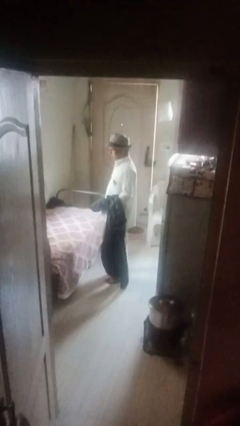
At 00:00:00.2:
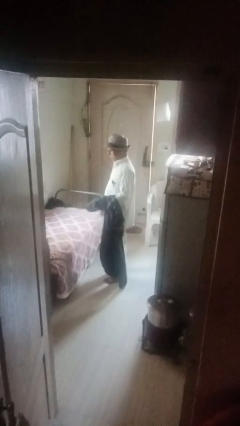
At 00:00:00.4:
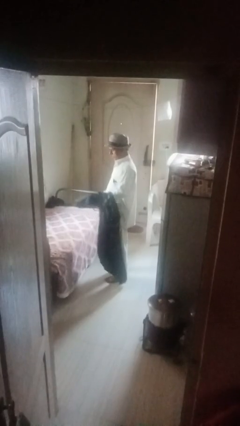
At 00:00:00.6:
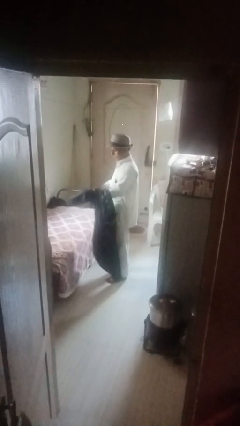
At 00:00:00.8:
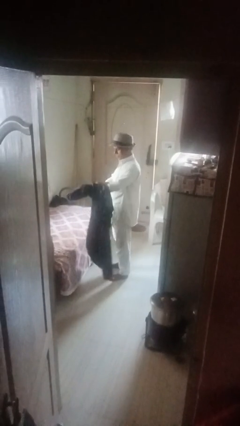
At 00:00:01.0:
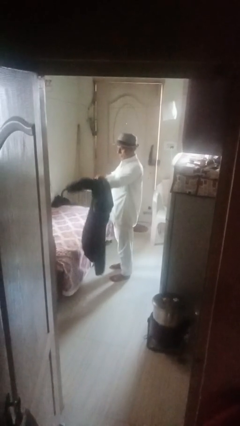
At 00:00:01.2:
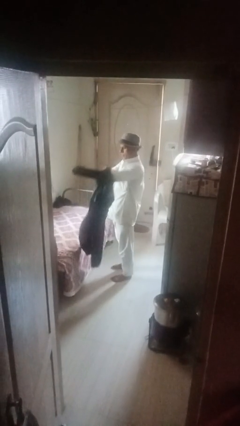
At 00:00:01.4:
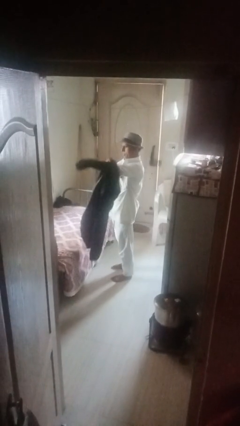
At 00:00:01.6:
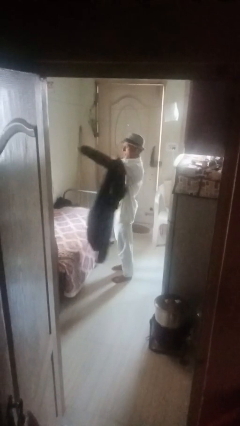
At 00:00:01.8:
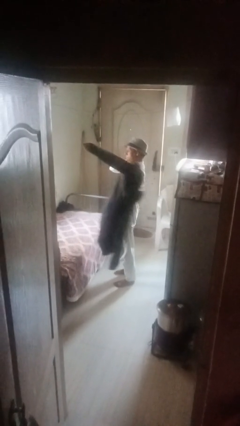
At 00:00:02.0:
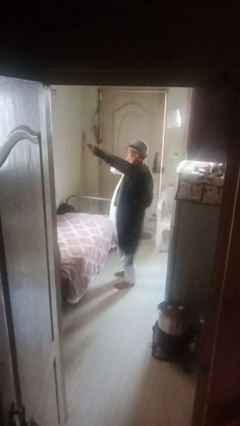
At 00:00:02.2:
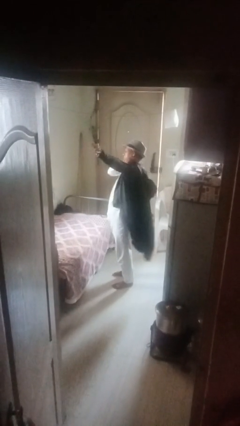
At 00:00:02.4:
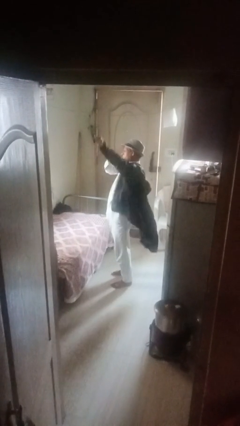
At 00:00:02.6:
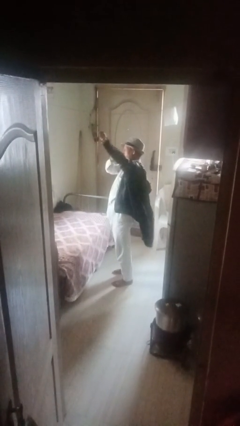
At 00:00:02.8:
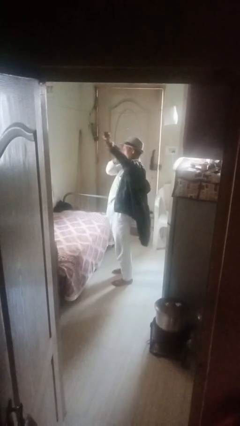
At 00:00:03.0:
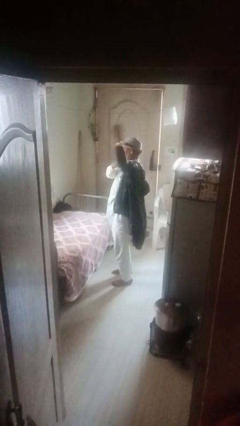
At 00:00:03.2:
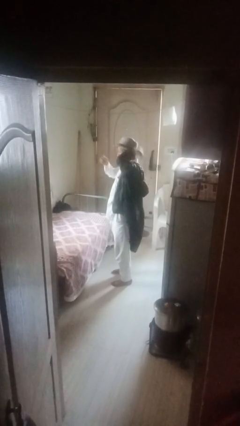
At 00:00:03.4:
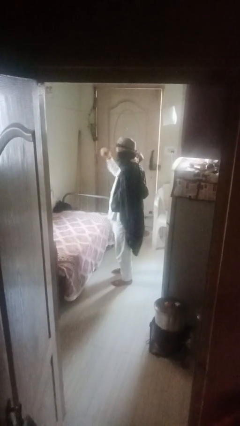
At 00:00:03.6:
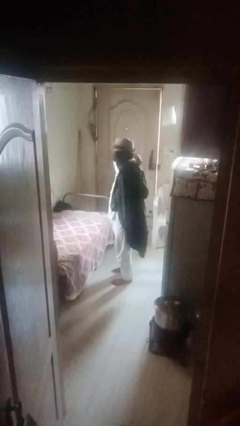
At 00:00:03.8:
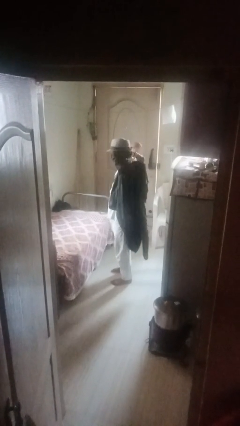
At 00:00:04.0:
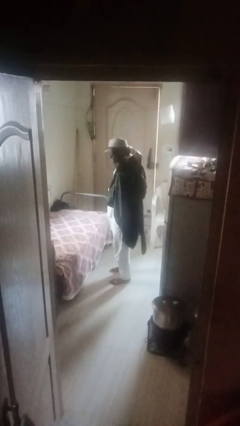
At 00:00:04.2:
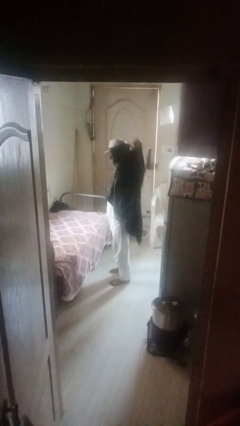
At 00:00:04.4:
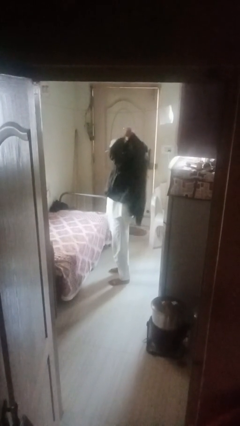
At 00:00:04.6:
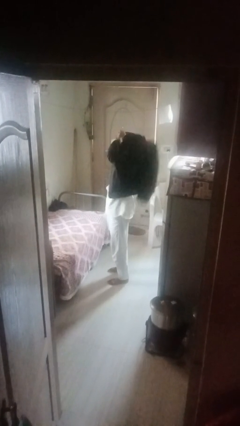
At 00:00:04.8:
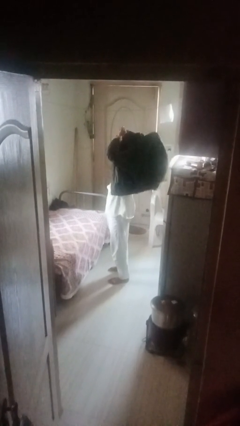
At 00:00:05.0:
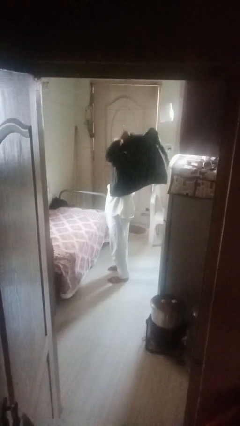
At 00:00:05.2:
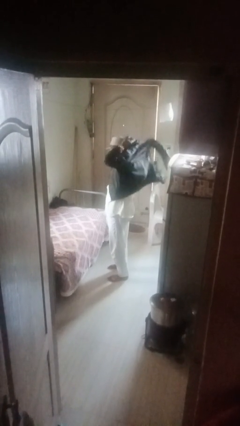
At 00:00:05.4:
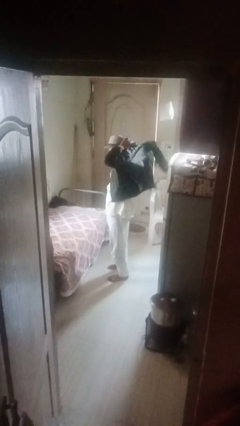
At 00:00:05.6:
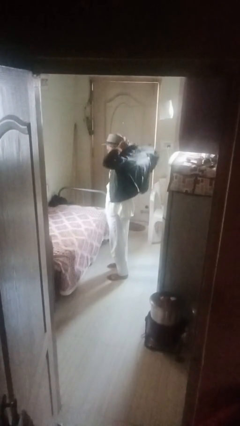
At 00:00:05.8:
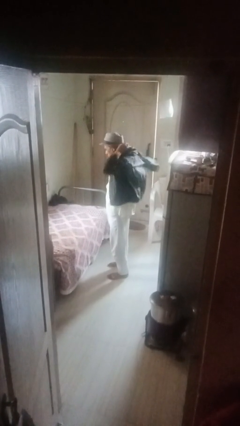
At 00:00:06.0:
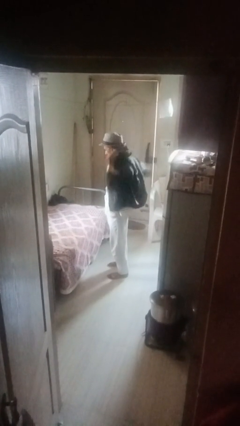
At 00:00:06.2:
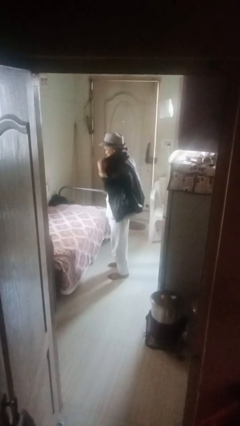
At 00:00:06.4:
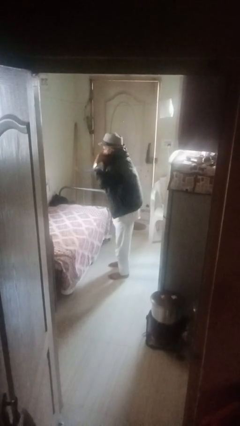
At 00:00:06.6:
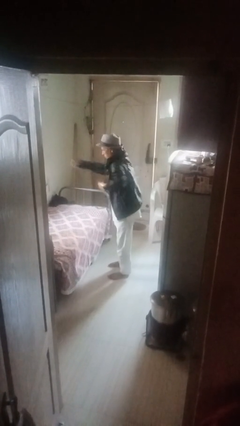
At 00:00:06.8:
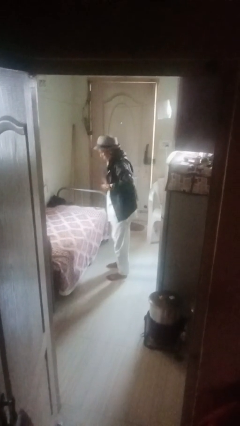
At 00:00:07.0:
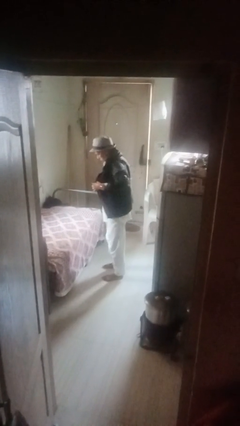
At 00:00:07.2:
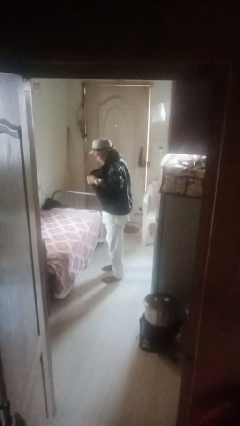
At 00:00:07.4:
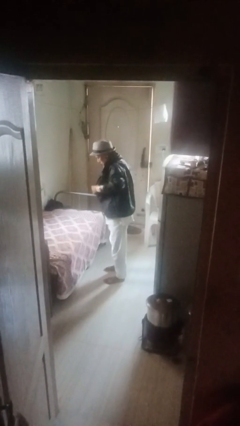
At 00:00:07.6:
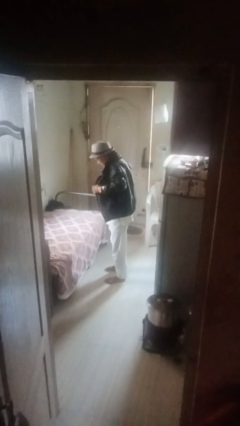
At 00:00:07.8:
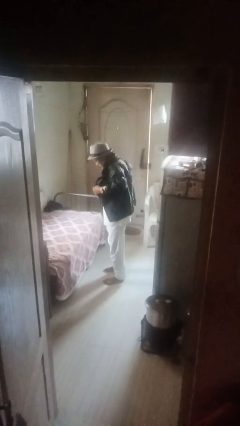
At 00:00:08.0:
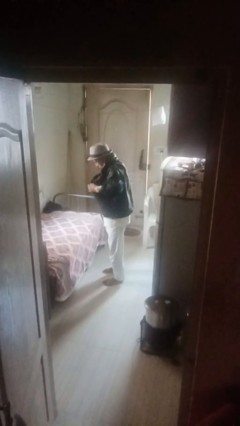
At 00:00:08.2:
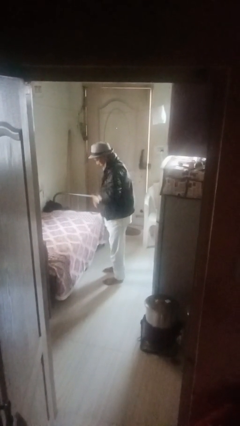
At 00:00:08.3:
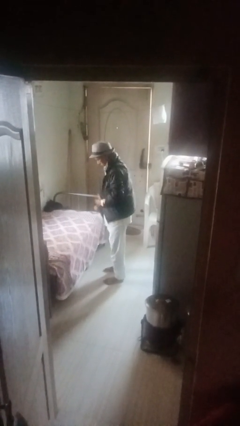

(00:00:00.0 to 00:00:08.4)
person puts on jacket

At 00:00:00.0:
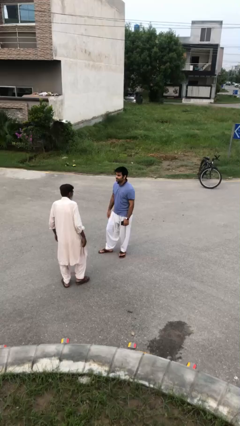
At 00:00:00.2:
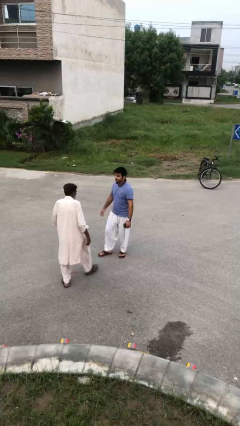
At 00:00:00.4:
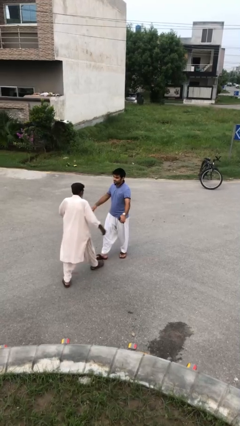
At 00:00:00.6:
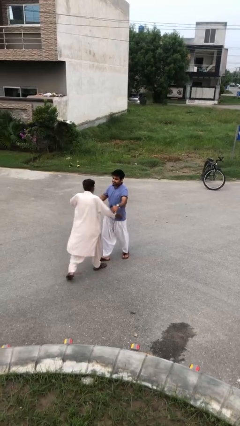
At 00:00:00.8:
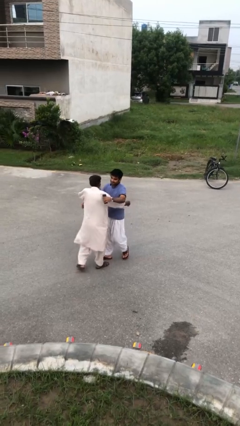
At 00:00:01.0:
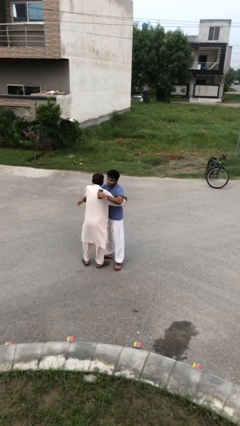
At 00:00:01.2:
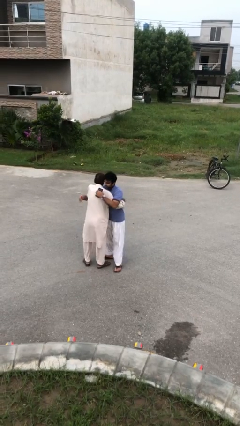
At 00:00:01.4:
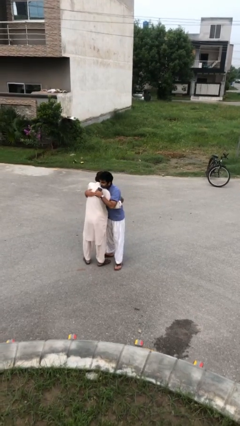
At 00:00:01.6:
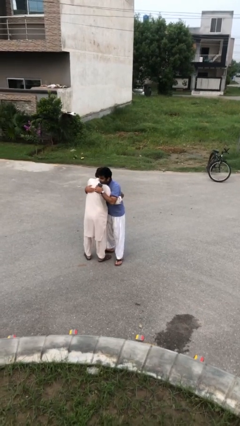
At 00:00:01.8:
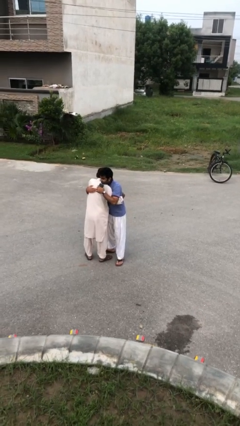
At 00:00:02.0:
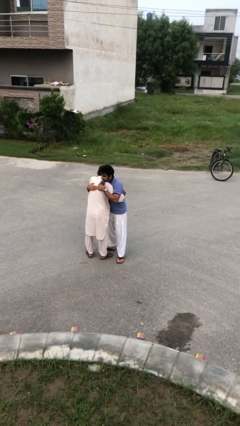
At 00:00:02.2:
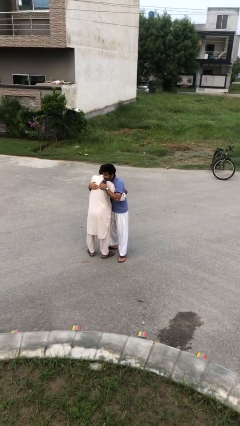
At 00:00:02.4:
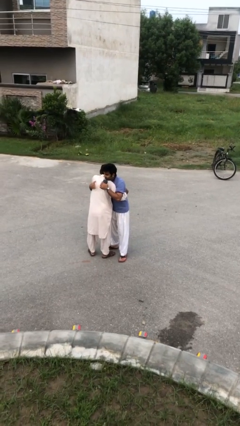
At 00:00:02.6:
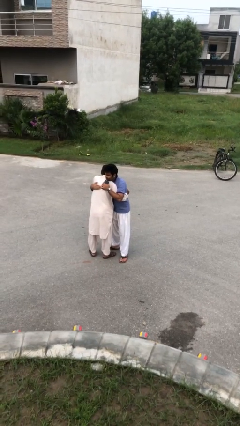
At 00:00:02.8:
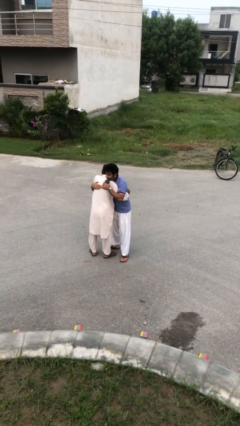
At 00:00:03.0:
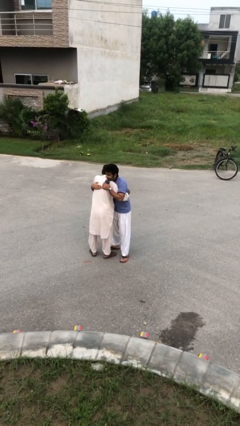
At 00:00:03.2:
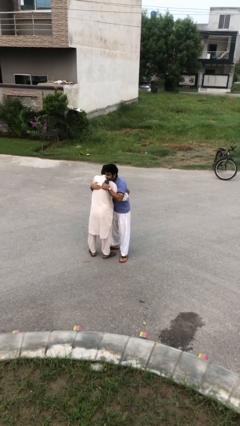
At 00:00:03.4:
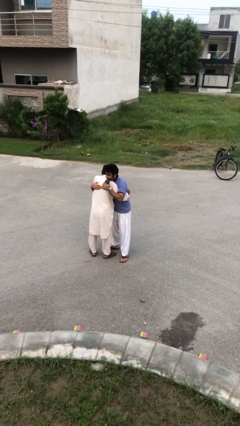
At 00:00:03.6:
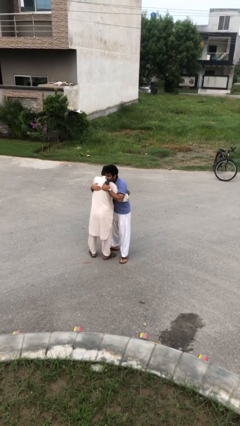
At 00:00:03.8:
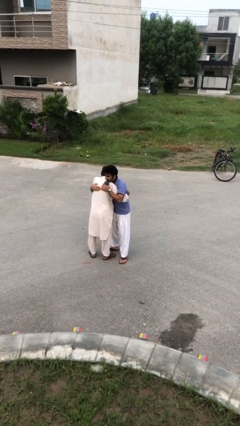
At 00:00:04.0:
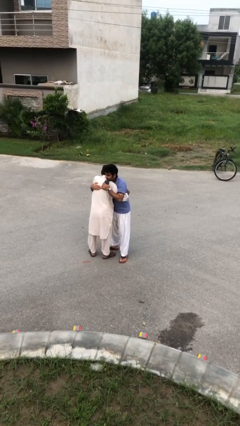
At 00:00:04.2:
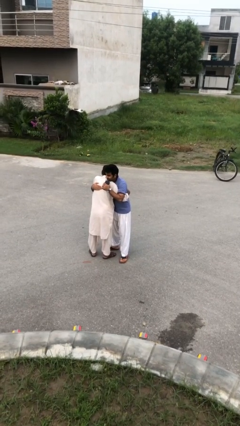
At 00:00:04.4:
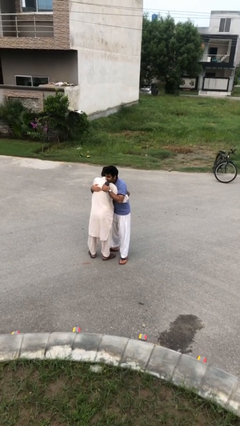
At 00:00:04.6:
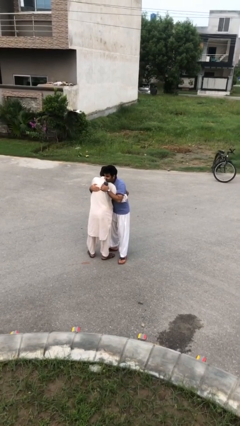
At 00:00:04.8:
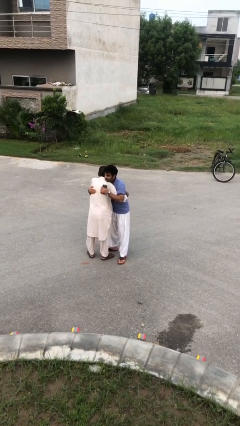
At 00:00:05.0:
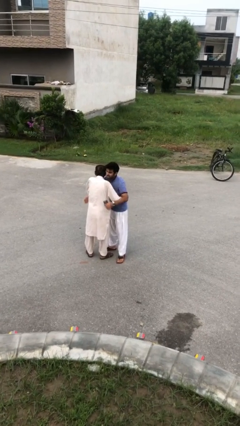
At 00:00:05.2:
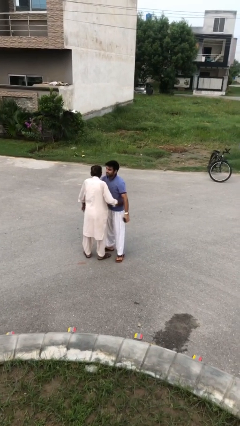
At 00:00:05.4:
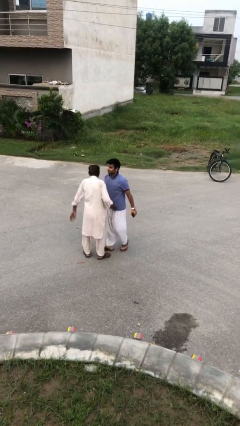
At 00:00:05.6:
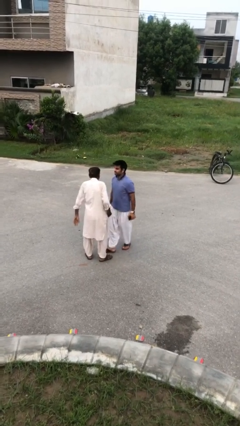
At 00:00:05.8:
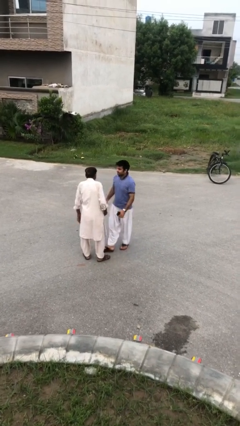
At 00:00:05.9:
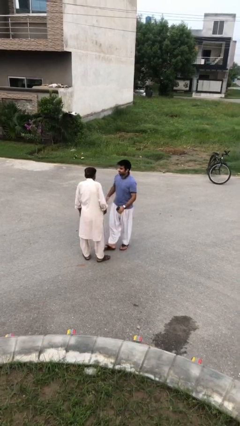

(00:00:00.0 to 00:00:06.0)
person embraces person

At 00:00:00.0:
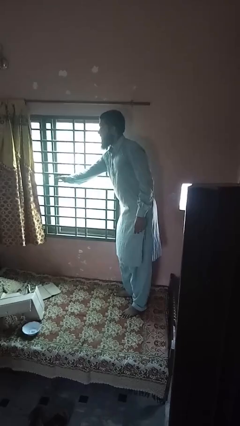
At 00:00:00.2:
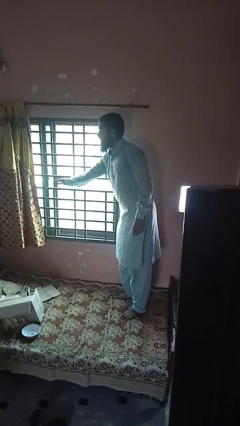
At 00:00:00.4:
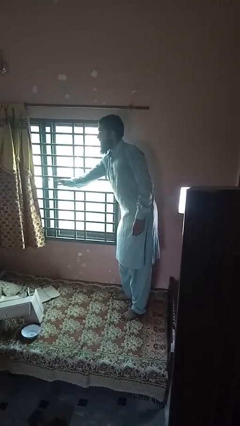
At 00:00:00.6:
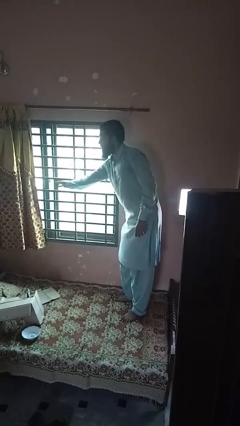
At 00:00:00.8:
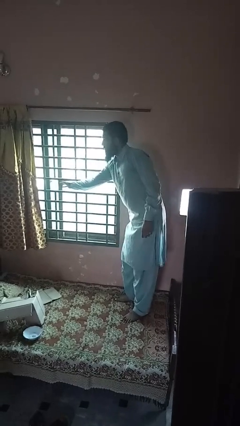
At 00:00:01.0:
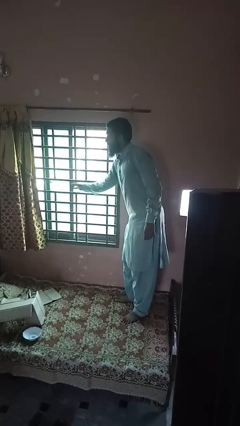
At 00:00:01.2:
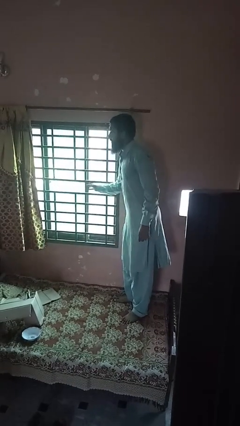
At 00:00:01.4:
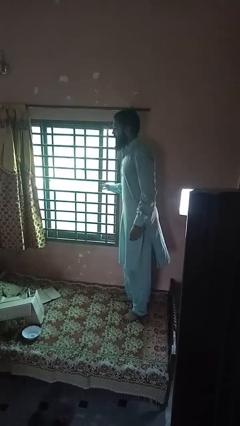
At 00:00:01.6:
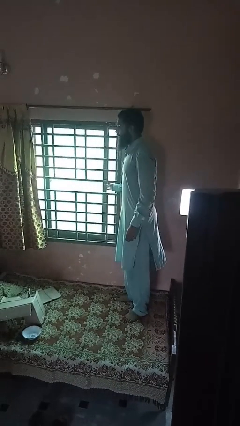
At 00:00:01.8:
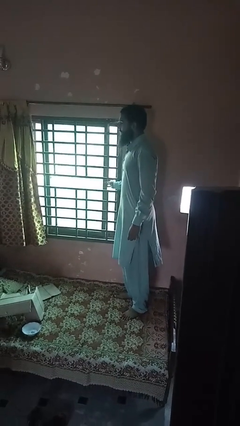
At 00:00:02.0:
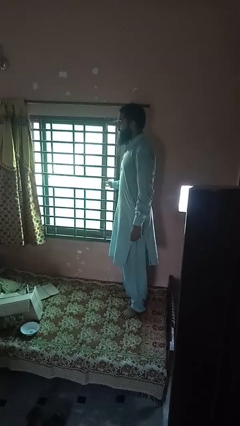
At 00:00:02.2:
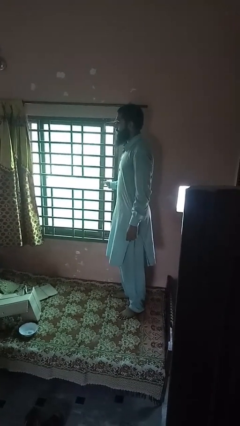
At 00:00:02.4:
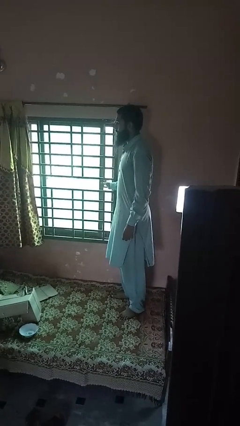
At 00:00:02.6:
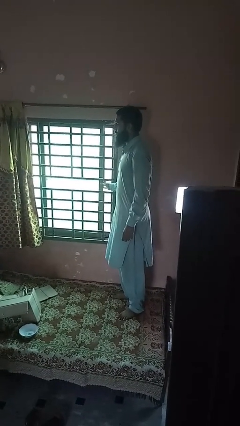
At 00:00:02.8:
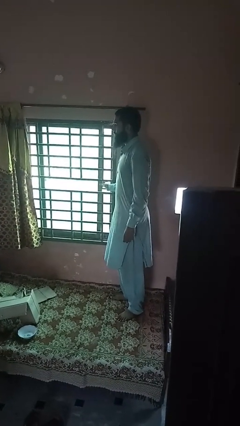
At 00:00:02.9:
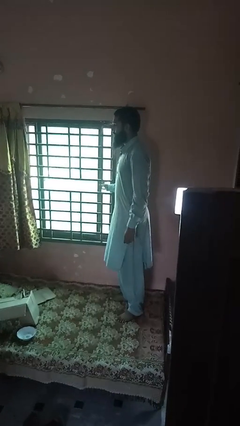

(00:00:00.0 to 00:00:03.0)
person closes home window

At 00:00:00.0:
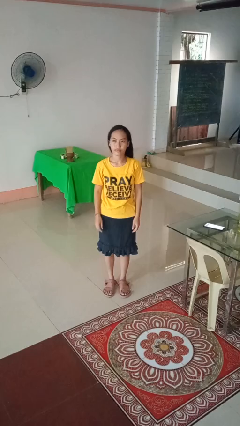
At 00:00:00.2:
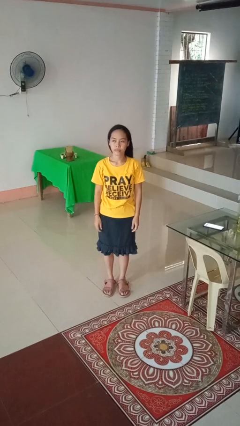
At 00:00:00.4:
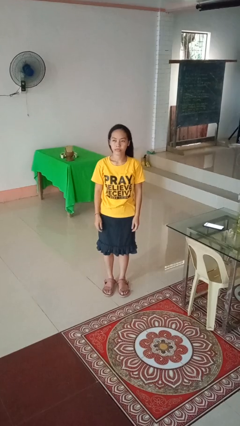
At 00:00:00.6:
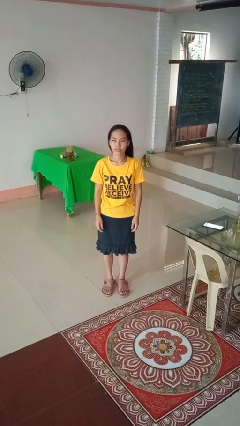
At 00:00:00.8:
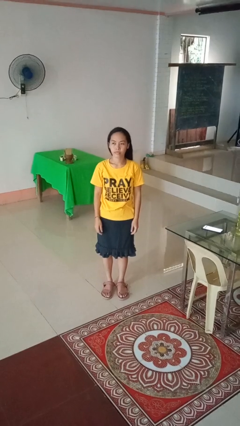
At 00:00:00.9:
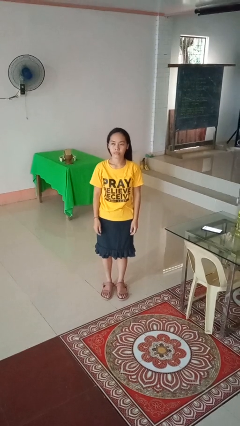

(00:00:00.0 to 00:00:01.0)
person gestures lower hand
